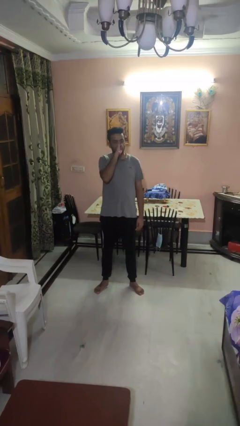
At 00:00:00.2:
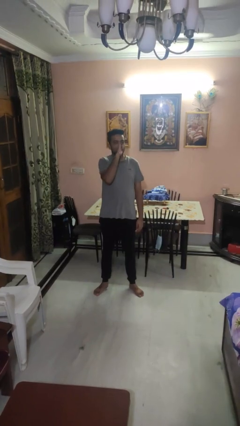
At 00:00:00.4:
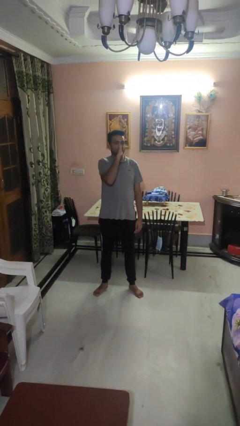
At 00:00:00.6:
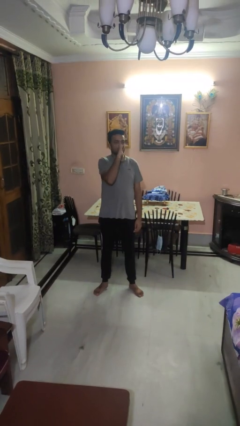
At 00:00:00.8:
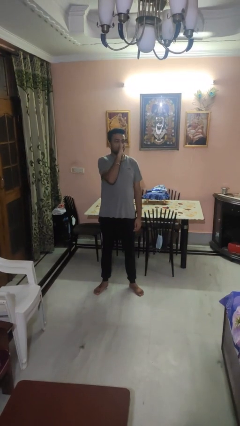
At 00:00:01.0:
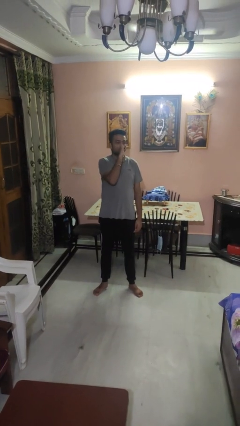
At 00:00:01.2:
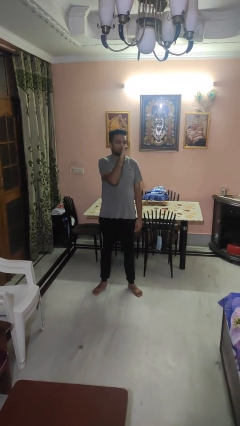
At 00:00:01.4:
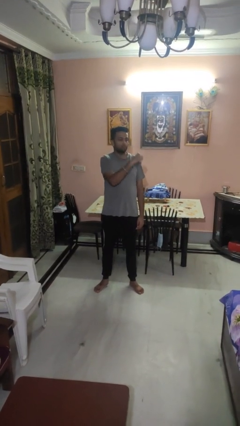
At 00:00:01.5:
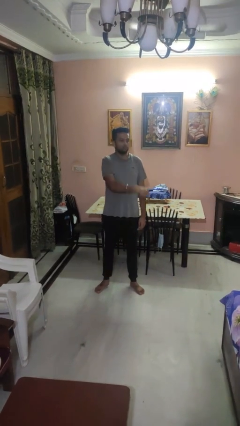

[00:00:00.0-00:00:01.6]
person vapes

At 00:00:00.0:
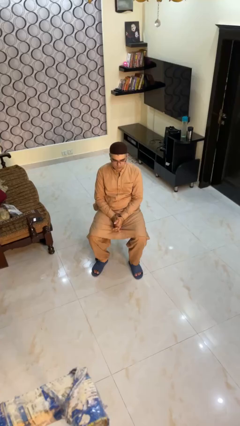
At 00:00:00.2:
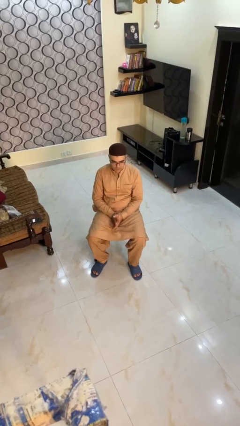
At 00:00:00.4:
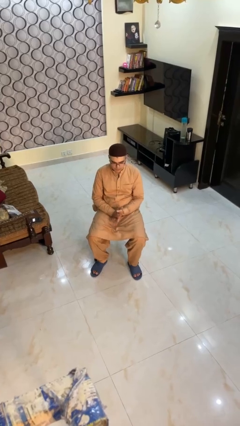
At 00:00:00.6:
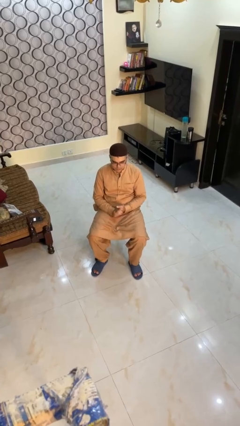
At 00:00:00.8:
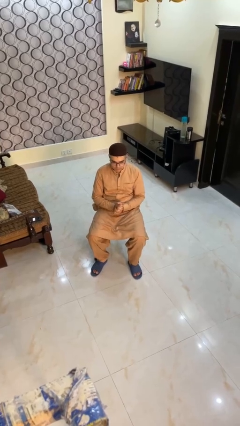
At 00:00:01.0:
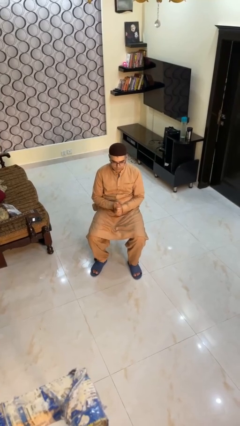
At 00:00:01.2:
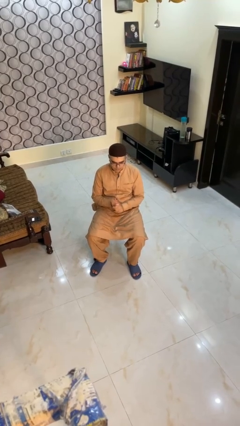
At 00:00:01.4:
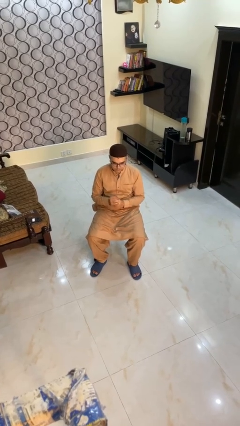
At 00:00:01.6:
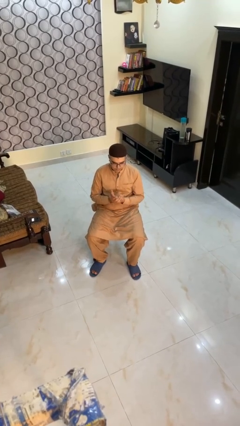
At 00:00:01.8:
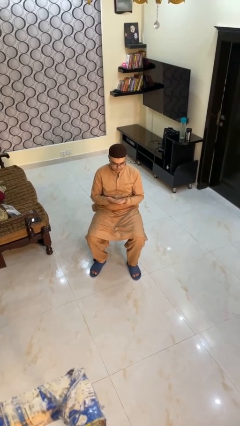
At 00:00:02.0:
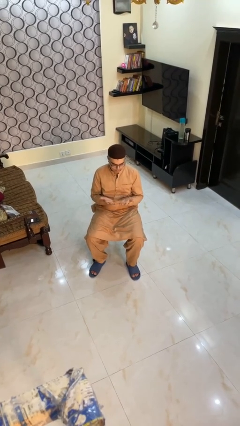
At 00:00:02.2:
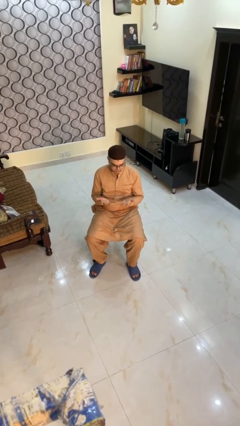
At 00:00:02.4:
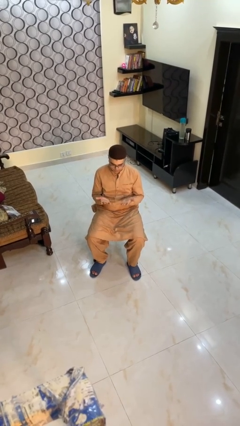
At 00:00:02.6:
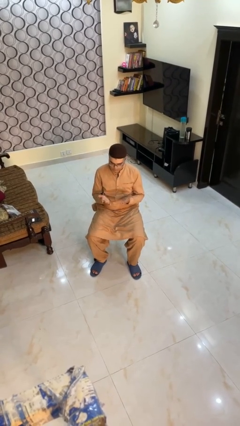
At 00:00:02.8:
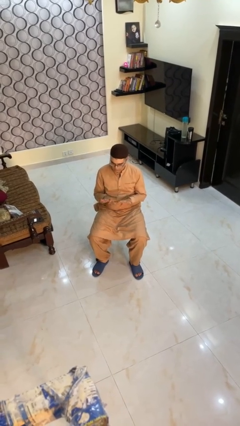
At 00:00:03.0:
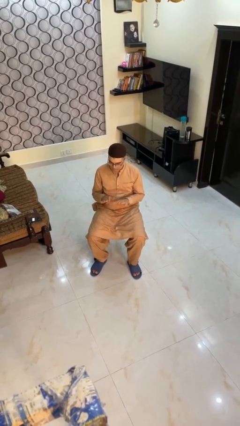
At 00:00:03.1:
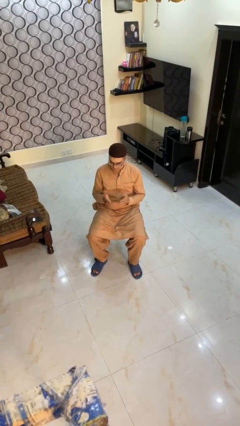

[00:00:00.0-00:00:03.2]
person looks at hands in lap

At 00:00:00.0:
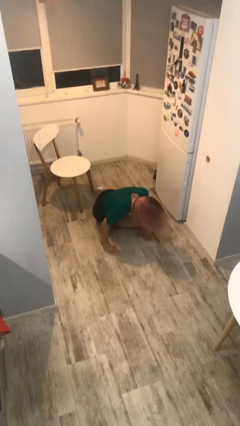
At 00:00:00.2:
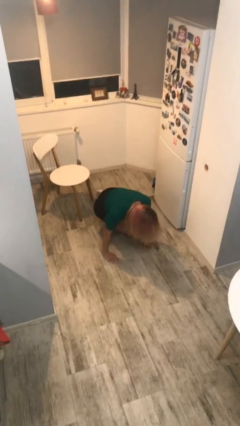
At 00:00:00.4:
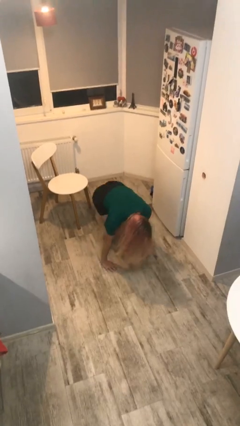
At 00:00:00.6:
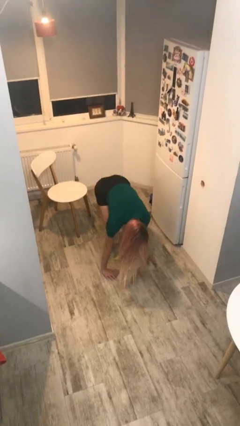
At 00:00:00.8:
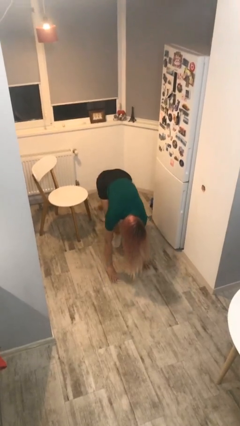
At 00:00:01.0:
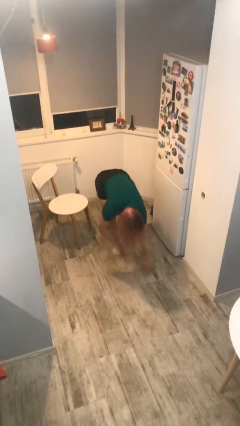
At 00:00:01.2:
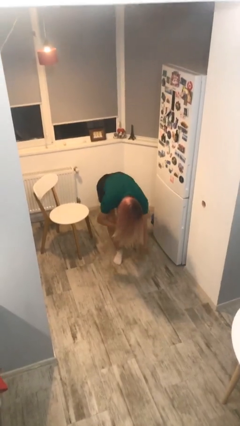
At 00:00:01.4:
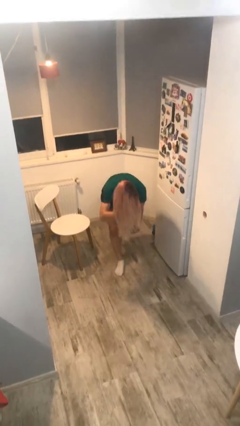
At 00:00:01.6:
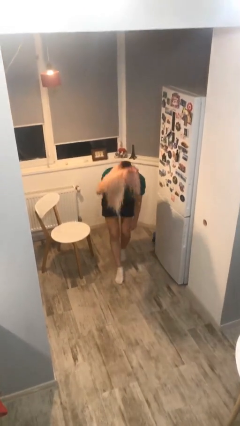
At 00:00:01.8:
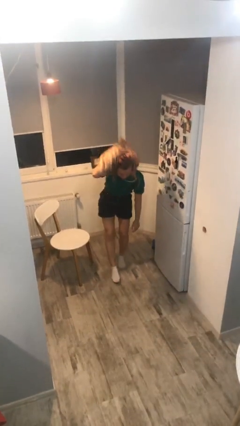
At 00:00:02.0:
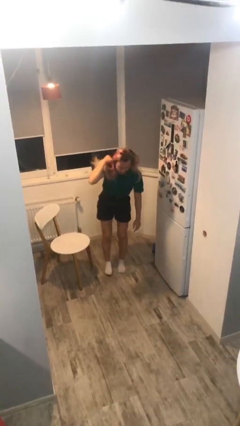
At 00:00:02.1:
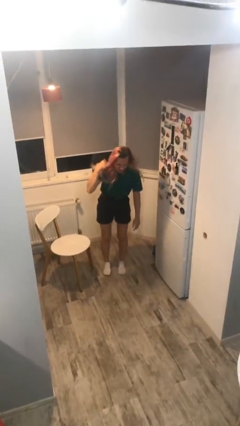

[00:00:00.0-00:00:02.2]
person stands up from floor

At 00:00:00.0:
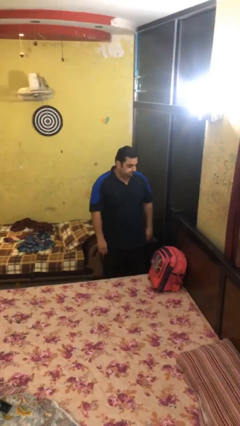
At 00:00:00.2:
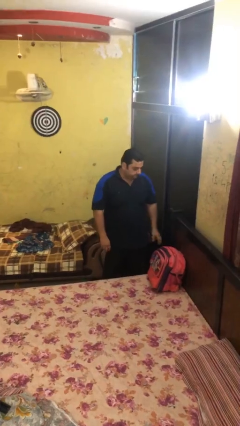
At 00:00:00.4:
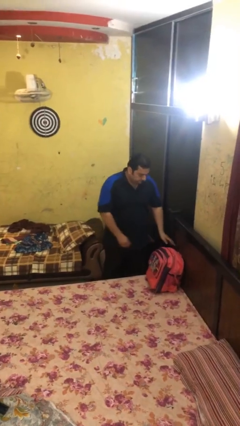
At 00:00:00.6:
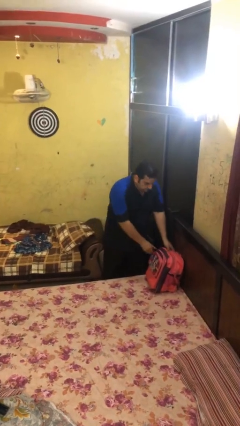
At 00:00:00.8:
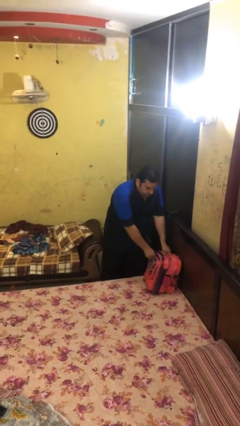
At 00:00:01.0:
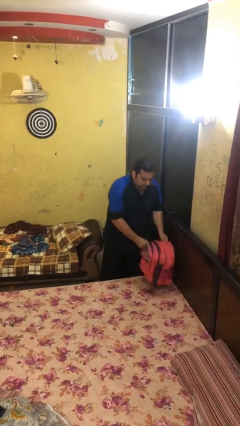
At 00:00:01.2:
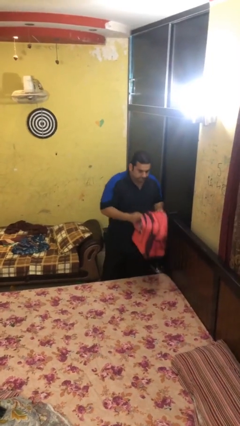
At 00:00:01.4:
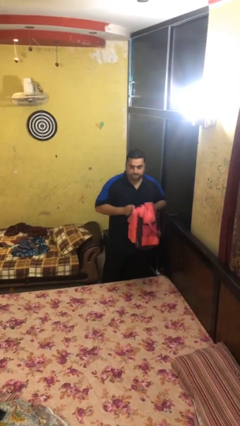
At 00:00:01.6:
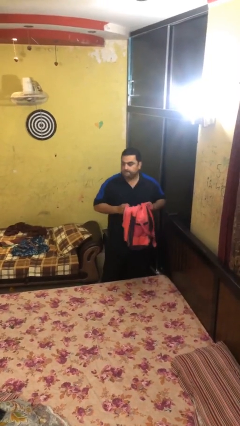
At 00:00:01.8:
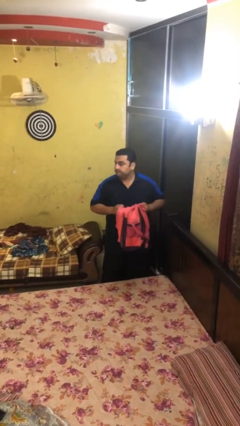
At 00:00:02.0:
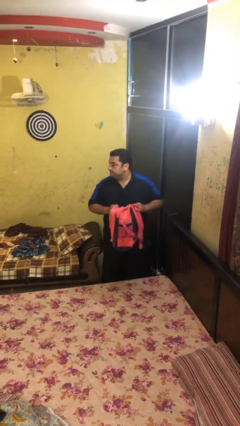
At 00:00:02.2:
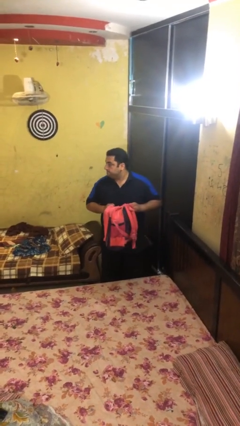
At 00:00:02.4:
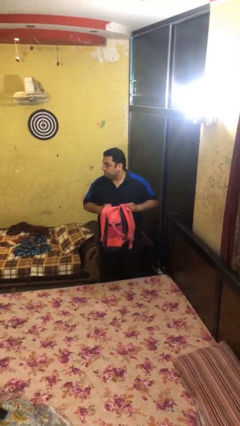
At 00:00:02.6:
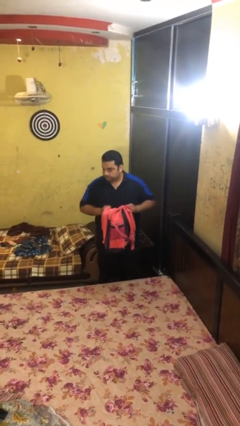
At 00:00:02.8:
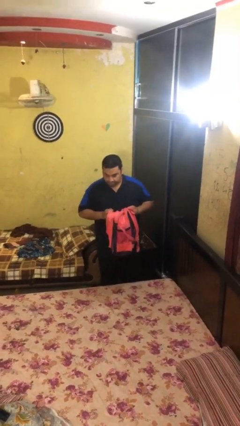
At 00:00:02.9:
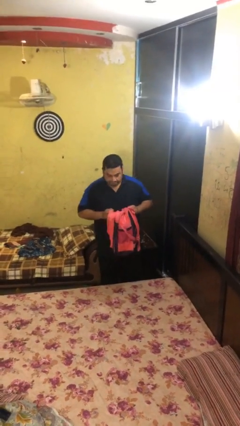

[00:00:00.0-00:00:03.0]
person picks up object from bed

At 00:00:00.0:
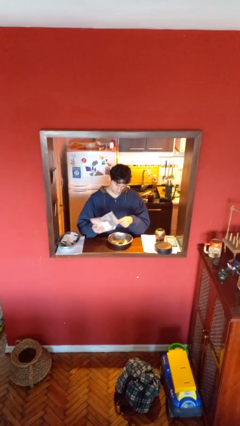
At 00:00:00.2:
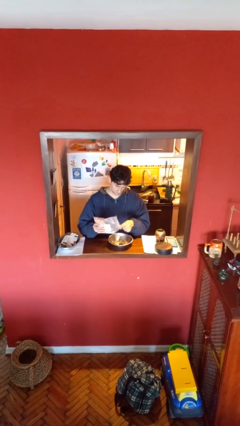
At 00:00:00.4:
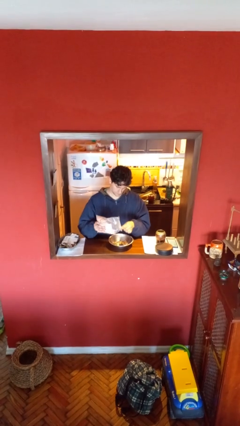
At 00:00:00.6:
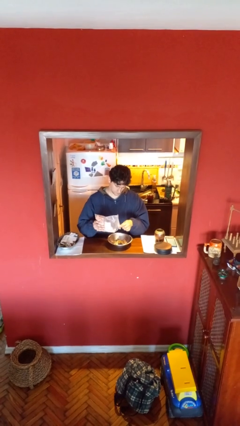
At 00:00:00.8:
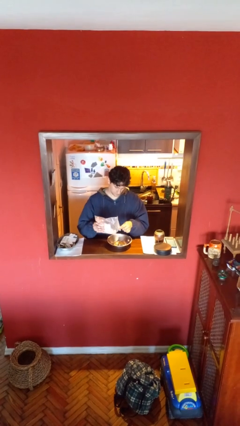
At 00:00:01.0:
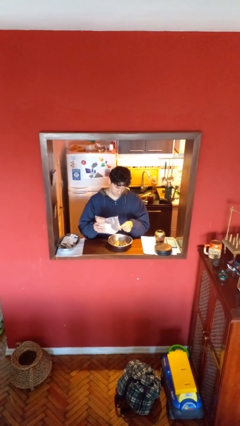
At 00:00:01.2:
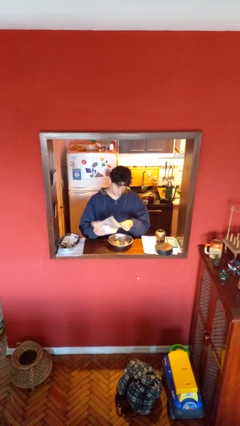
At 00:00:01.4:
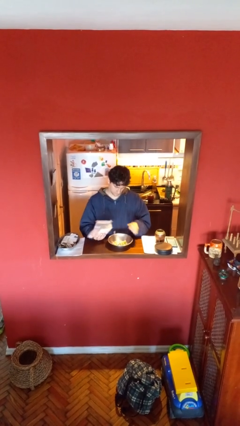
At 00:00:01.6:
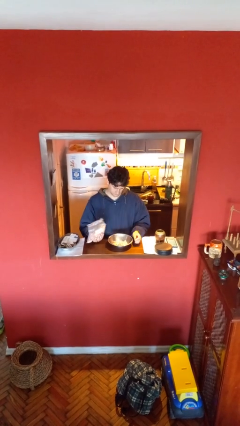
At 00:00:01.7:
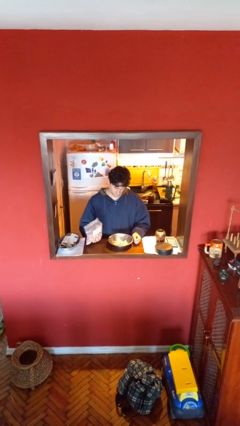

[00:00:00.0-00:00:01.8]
person pours into bowl

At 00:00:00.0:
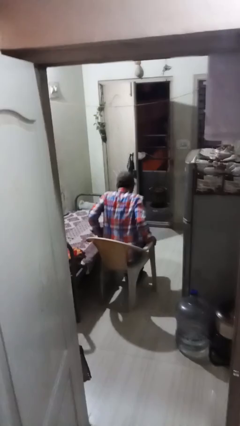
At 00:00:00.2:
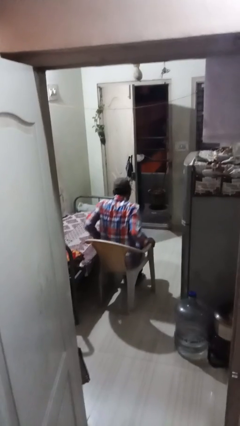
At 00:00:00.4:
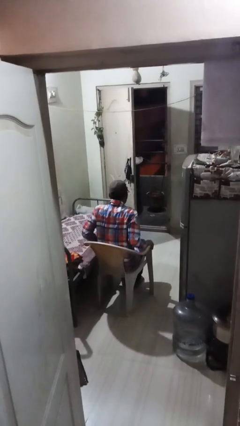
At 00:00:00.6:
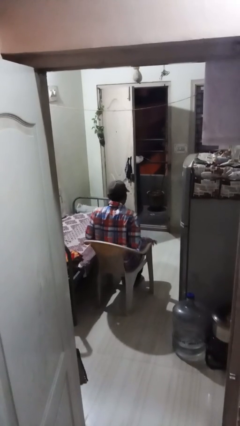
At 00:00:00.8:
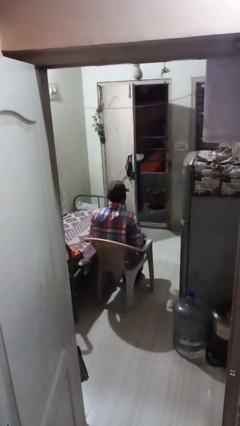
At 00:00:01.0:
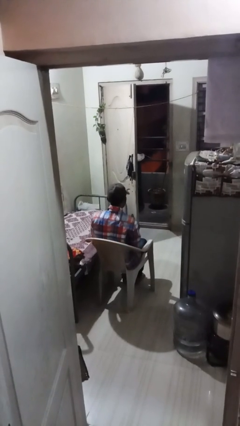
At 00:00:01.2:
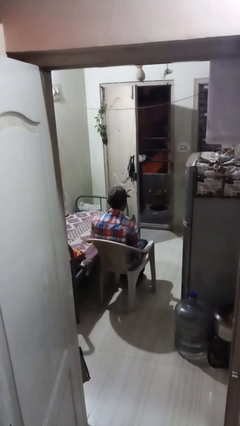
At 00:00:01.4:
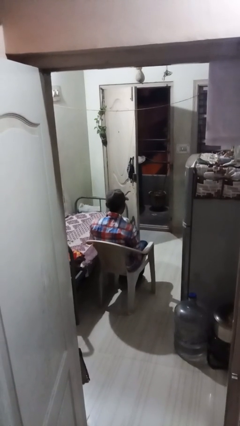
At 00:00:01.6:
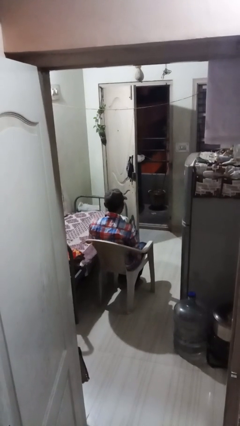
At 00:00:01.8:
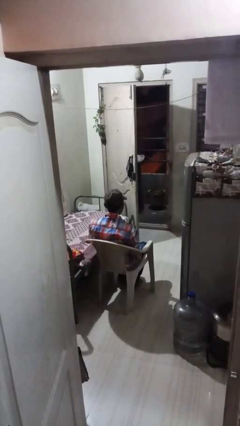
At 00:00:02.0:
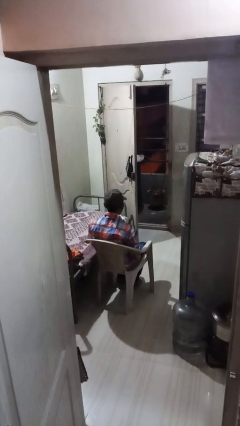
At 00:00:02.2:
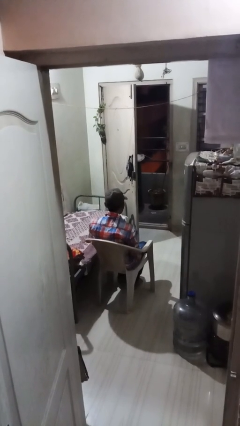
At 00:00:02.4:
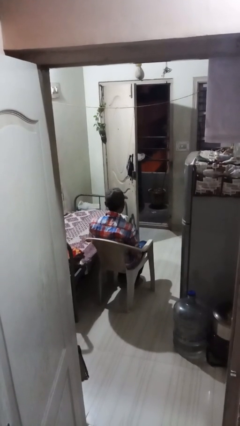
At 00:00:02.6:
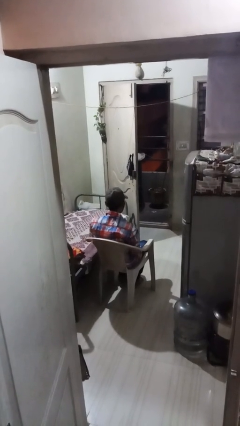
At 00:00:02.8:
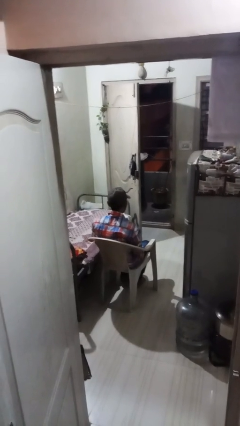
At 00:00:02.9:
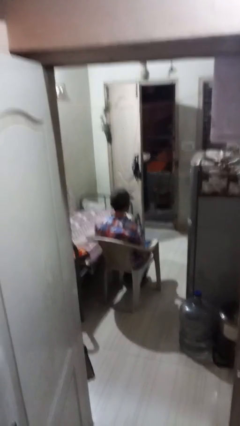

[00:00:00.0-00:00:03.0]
person sits down

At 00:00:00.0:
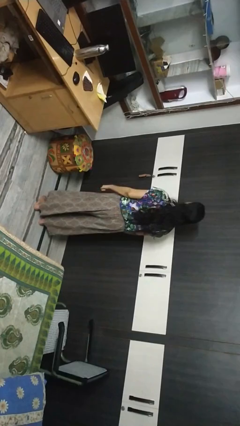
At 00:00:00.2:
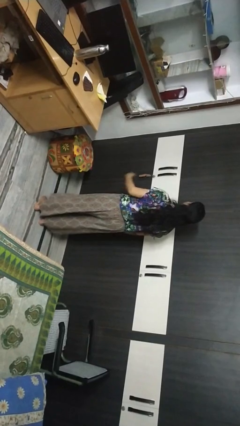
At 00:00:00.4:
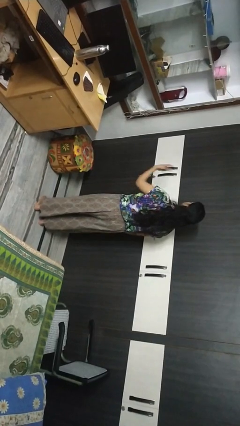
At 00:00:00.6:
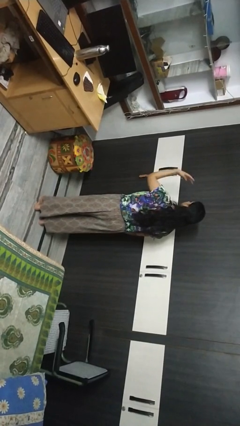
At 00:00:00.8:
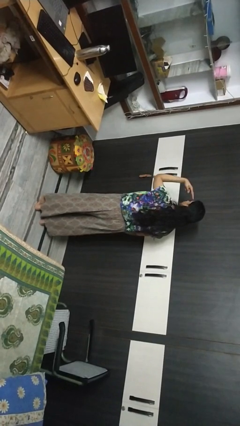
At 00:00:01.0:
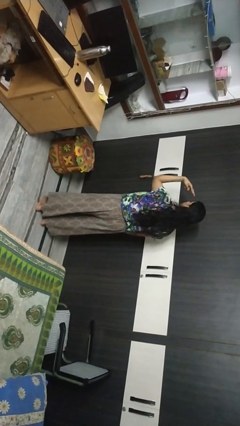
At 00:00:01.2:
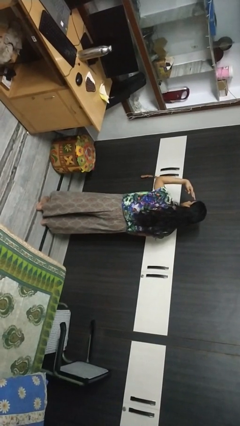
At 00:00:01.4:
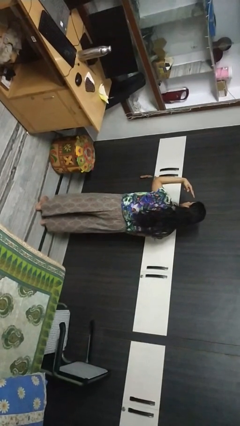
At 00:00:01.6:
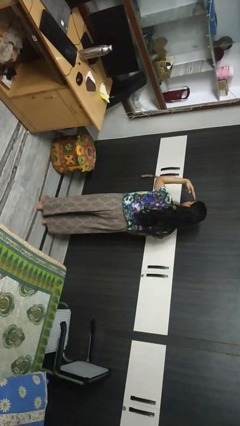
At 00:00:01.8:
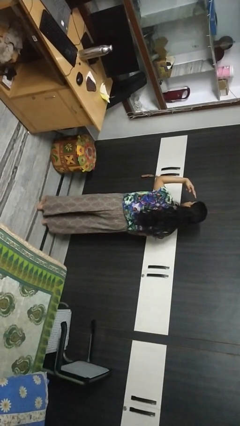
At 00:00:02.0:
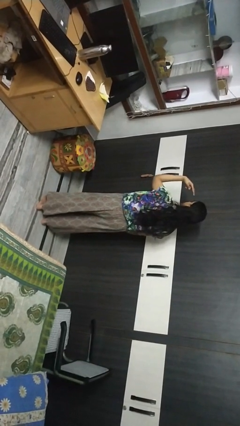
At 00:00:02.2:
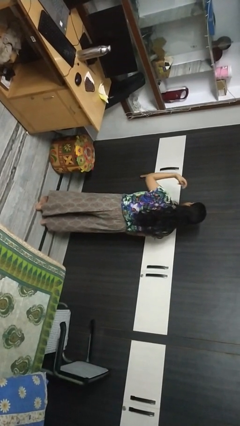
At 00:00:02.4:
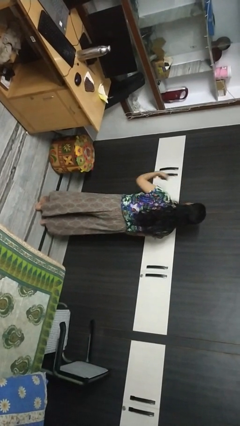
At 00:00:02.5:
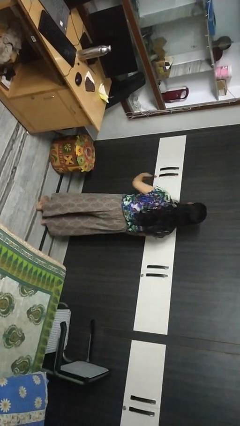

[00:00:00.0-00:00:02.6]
person gestures watch closely
